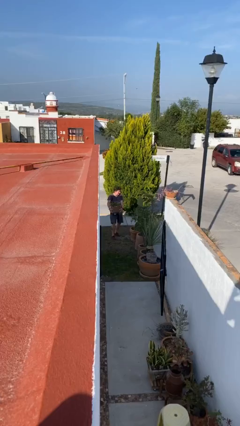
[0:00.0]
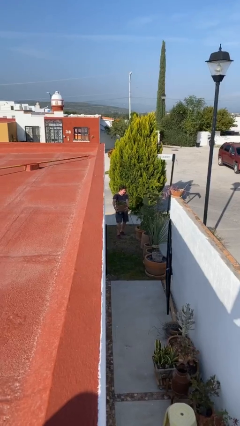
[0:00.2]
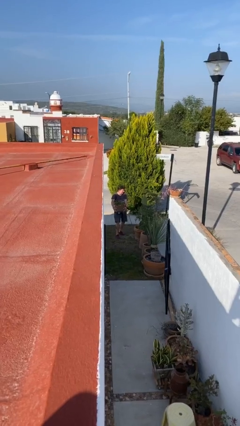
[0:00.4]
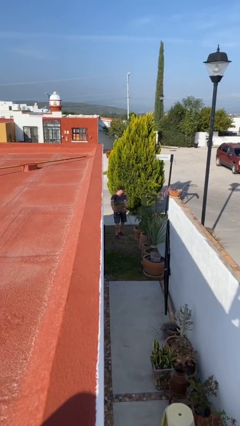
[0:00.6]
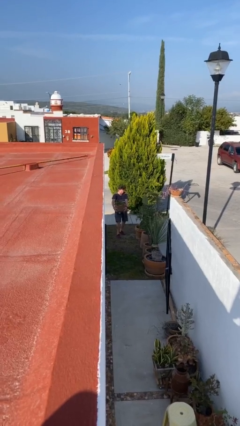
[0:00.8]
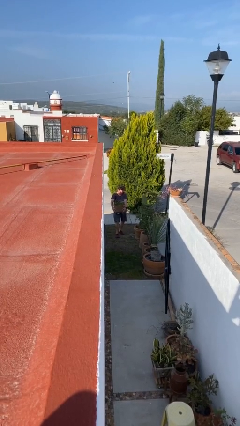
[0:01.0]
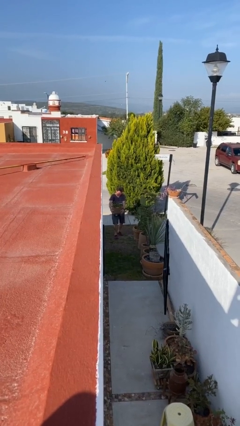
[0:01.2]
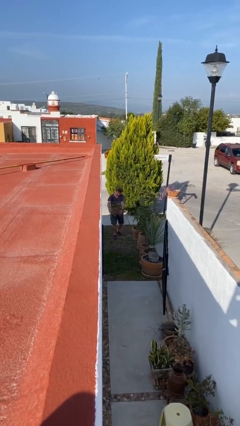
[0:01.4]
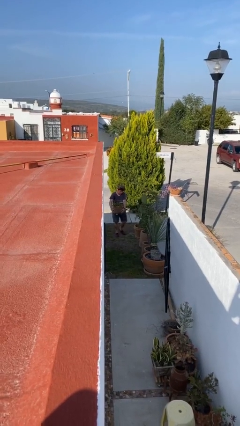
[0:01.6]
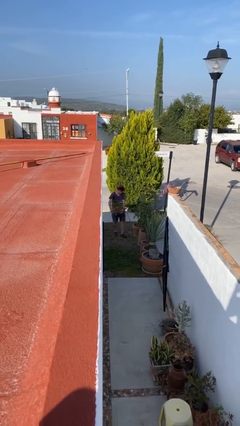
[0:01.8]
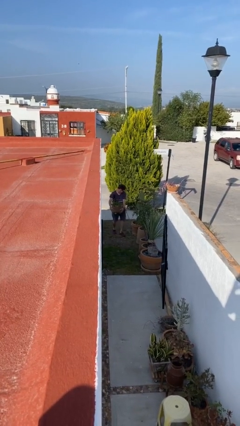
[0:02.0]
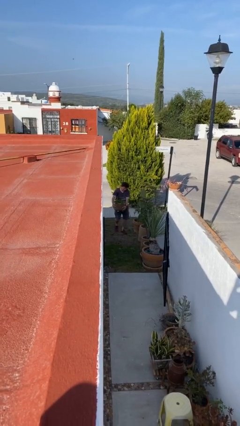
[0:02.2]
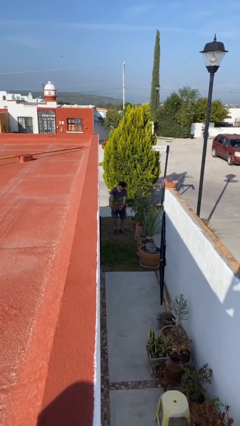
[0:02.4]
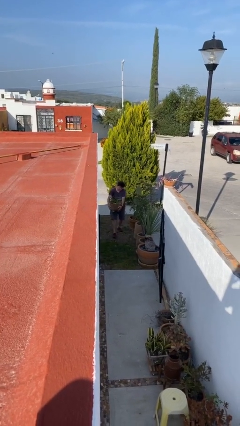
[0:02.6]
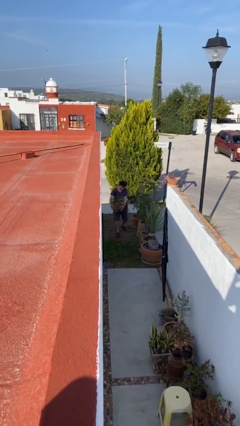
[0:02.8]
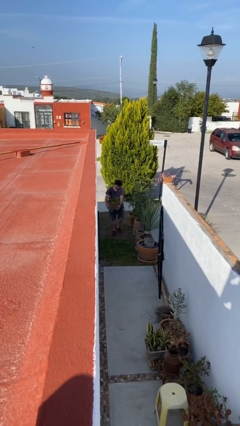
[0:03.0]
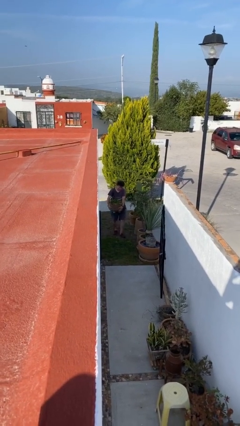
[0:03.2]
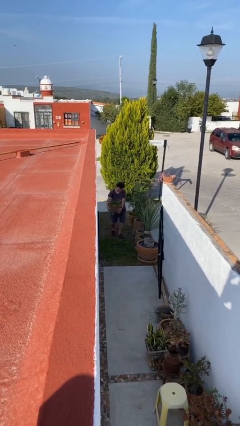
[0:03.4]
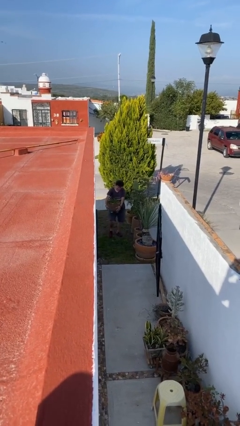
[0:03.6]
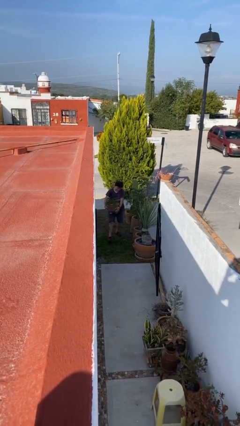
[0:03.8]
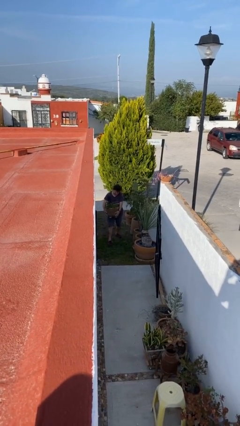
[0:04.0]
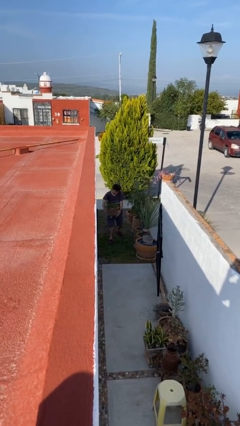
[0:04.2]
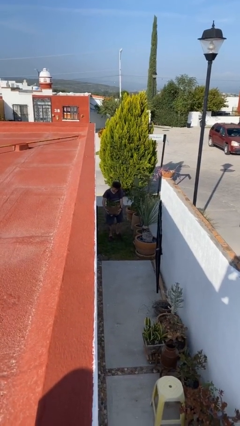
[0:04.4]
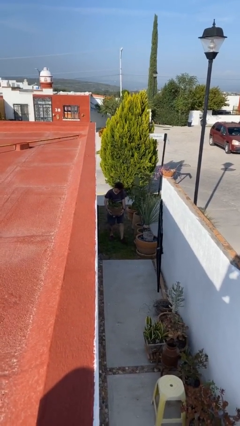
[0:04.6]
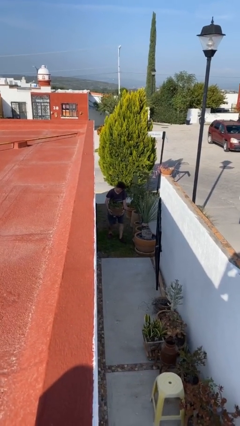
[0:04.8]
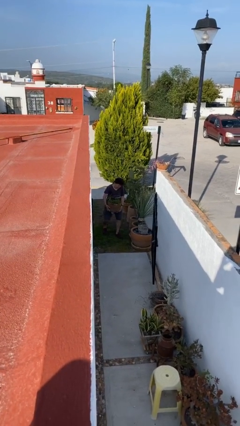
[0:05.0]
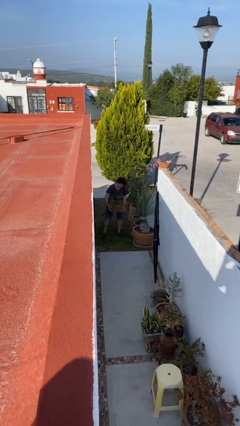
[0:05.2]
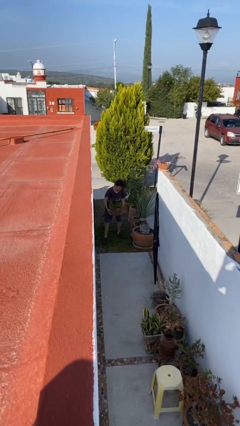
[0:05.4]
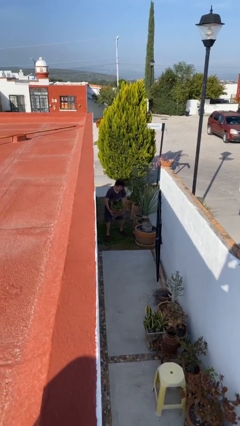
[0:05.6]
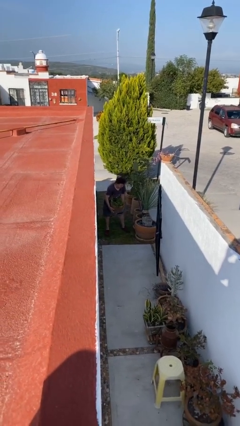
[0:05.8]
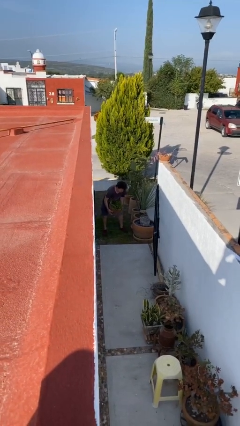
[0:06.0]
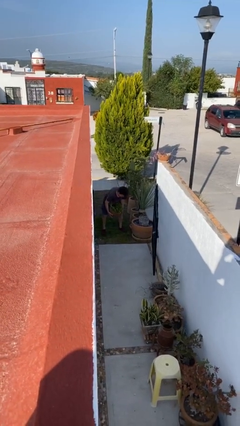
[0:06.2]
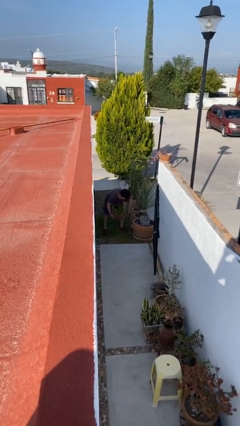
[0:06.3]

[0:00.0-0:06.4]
person carries heavy object

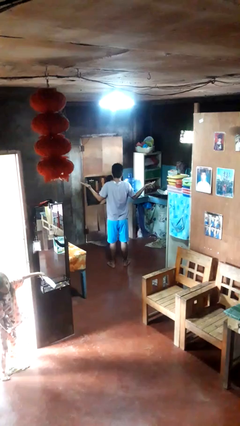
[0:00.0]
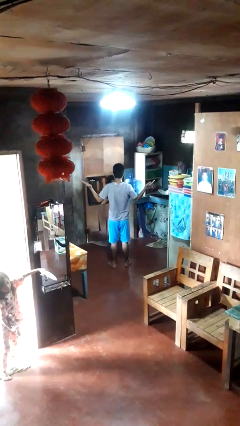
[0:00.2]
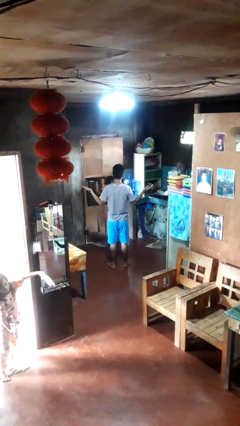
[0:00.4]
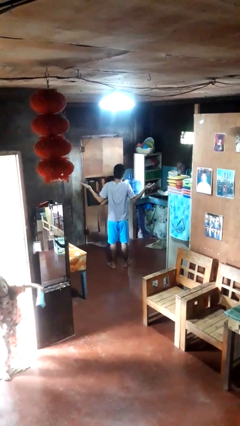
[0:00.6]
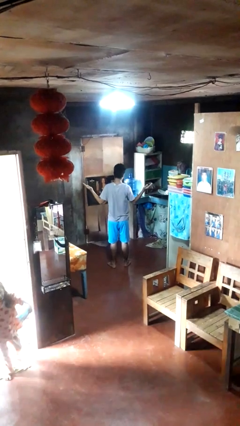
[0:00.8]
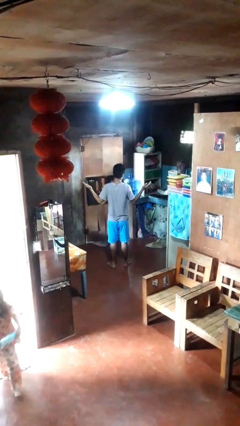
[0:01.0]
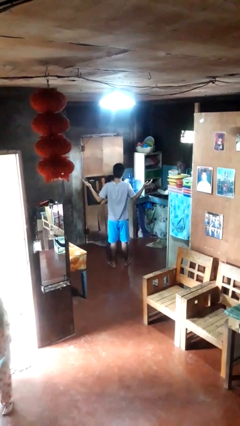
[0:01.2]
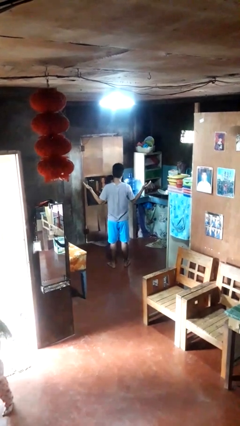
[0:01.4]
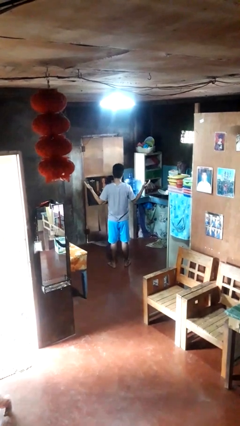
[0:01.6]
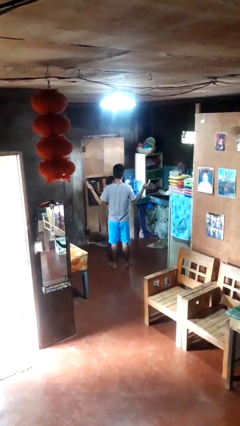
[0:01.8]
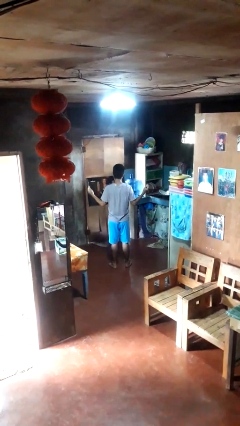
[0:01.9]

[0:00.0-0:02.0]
person shrugs

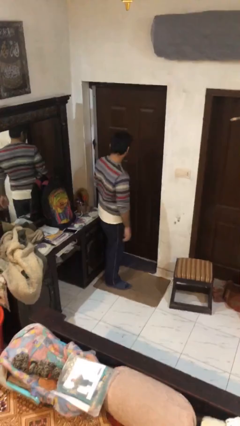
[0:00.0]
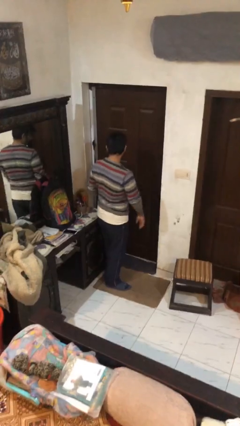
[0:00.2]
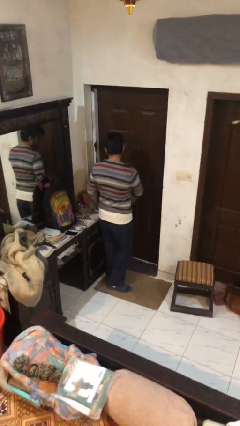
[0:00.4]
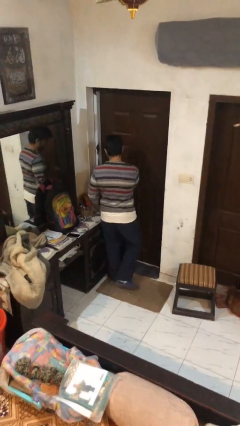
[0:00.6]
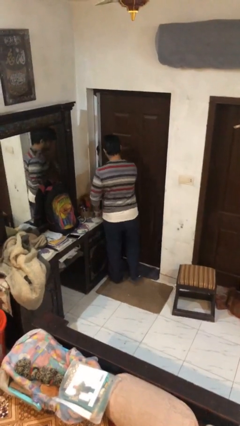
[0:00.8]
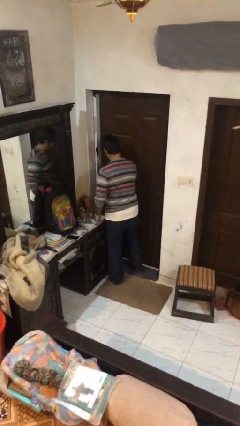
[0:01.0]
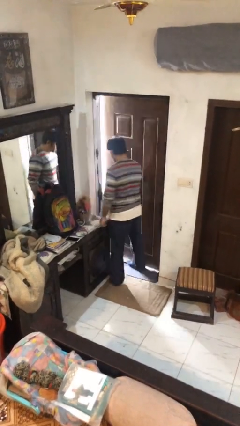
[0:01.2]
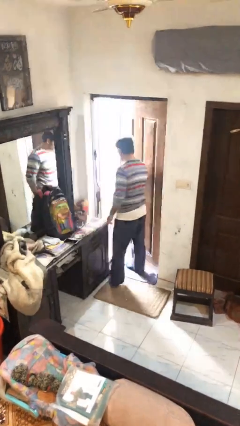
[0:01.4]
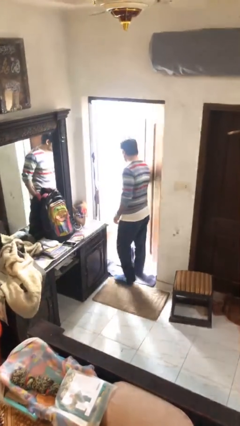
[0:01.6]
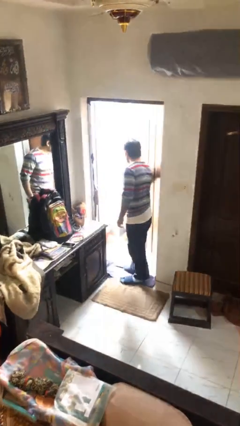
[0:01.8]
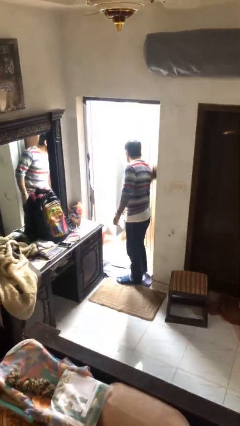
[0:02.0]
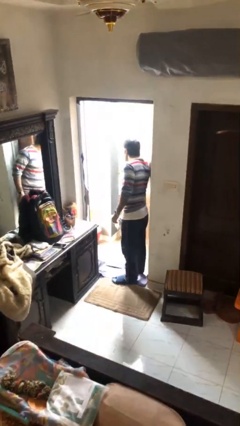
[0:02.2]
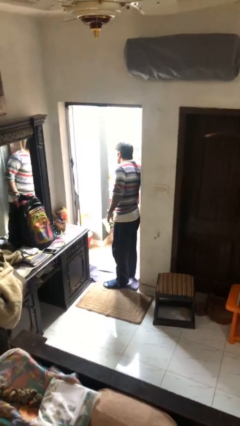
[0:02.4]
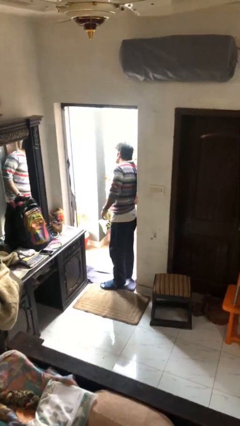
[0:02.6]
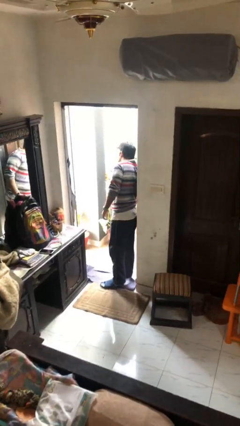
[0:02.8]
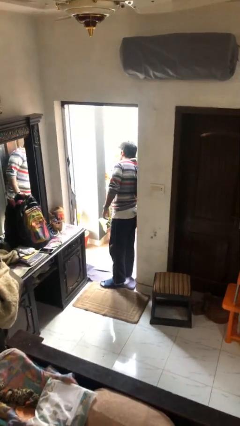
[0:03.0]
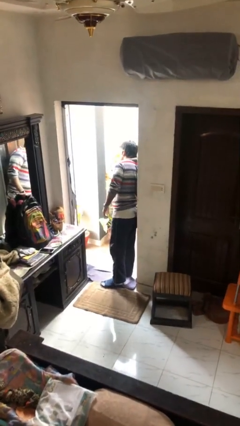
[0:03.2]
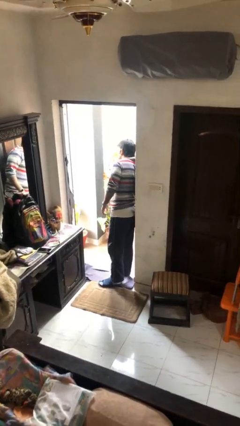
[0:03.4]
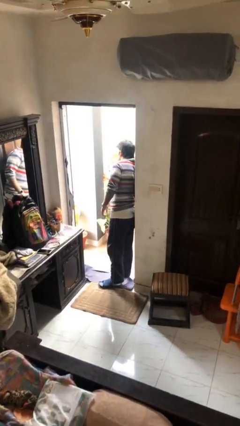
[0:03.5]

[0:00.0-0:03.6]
person opens facility door

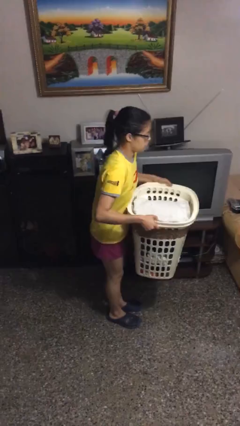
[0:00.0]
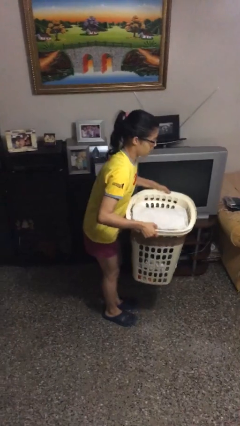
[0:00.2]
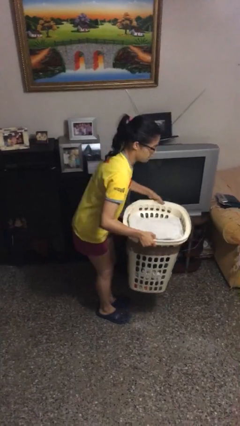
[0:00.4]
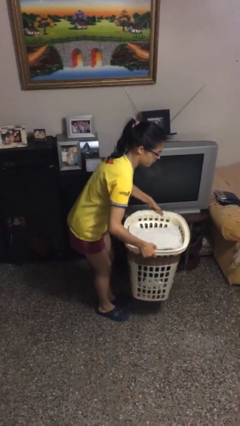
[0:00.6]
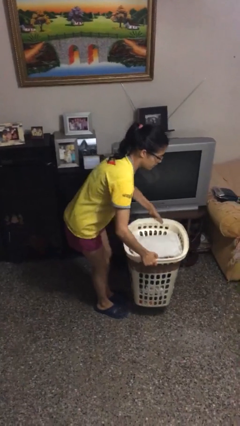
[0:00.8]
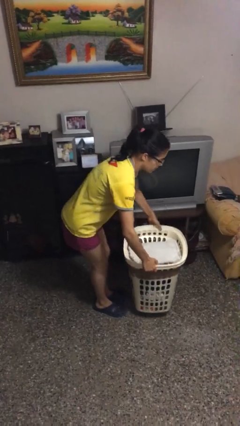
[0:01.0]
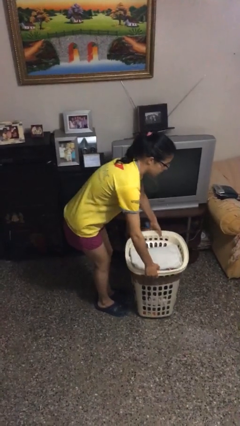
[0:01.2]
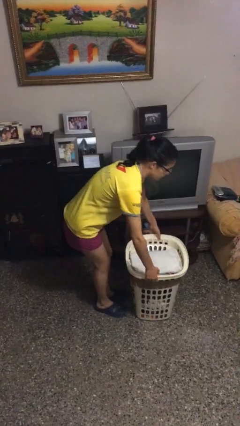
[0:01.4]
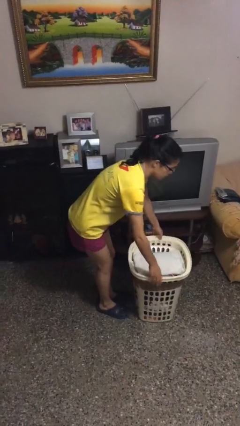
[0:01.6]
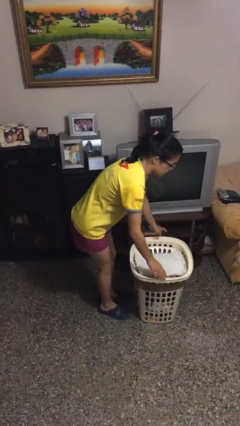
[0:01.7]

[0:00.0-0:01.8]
person puts down object on floor

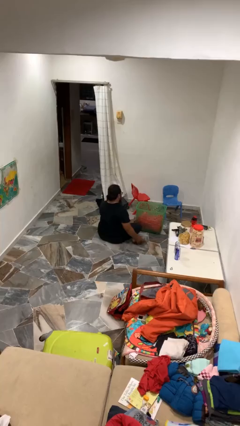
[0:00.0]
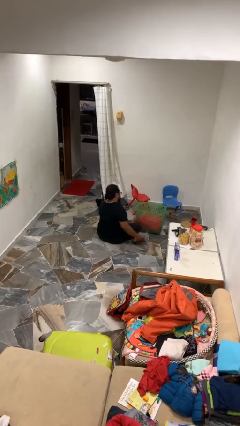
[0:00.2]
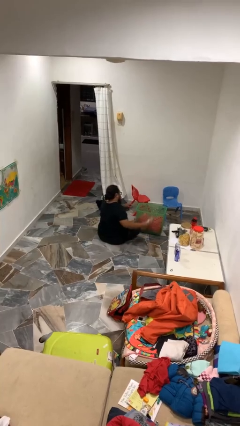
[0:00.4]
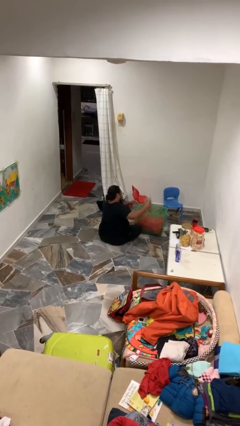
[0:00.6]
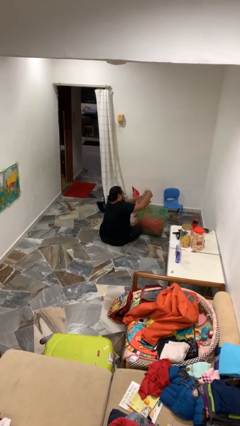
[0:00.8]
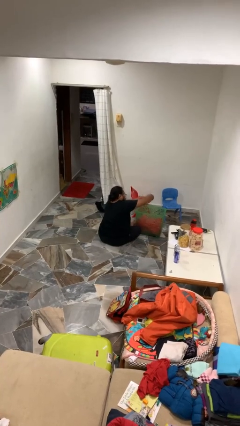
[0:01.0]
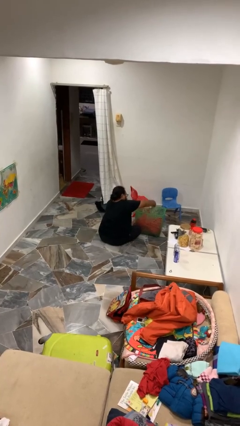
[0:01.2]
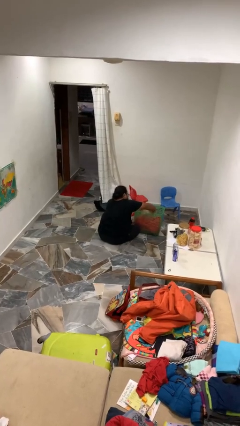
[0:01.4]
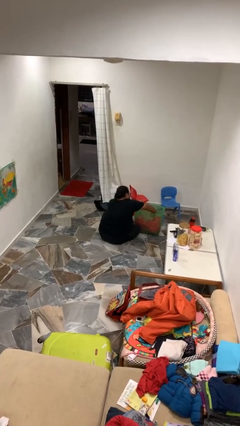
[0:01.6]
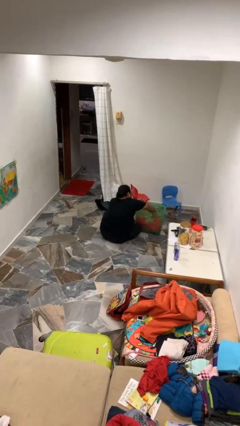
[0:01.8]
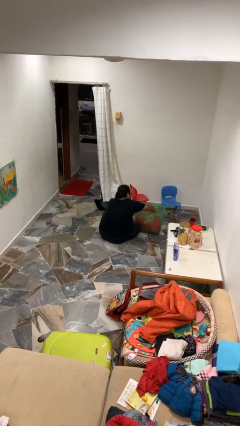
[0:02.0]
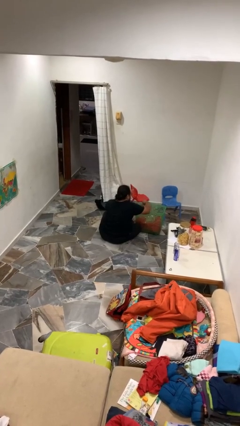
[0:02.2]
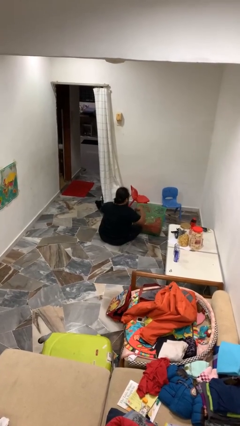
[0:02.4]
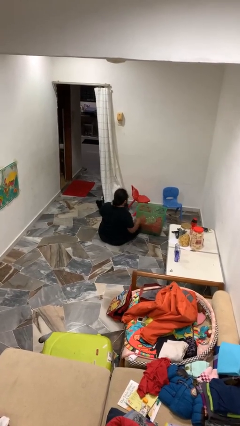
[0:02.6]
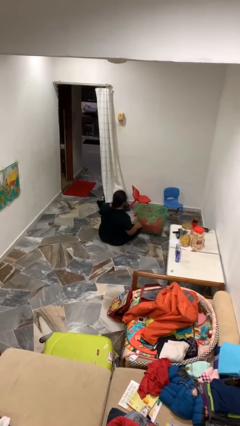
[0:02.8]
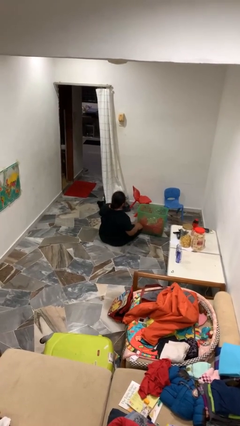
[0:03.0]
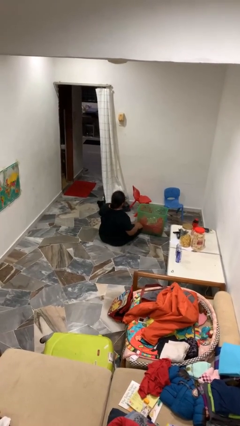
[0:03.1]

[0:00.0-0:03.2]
person puts object into basket
